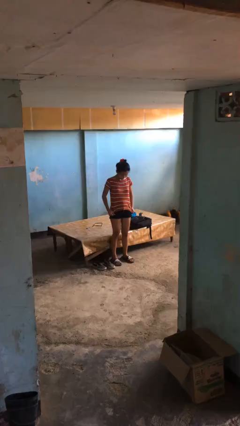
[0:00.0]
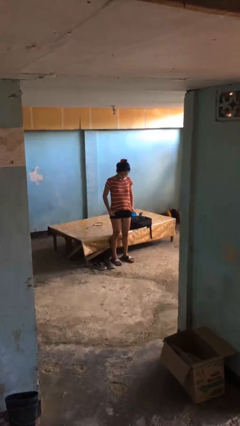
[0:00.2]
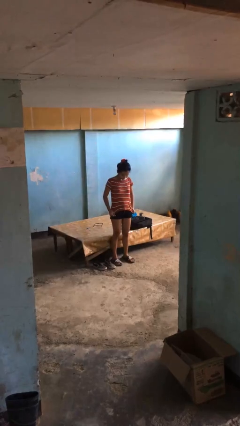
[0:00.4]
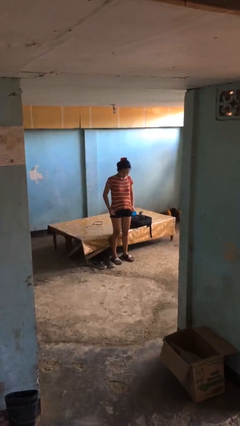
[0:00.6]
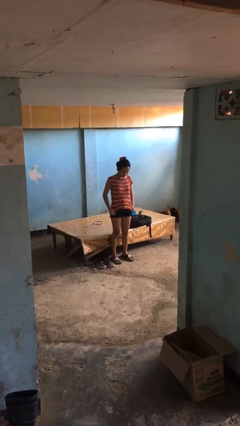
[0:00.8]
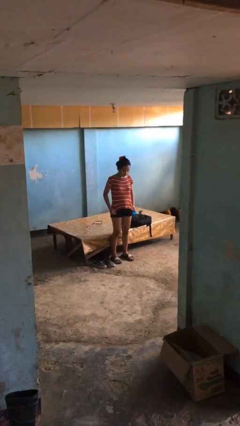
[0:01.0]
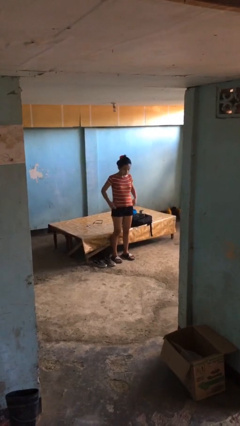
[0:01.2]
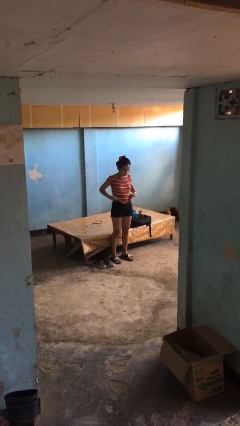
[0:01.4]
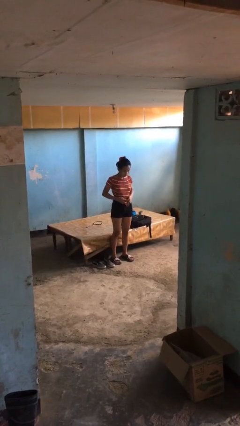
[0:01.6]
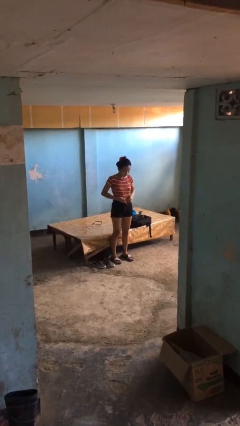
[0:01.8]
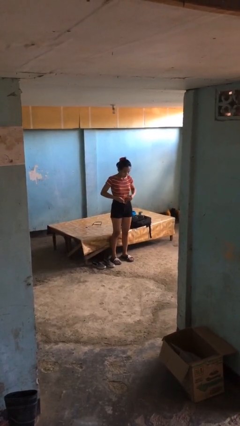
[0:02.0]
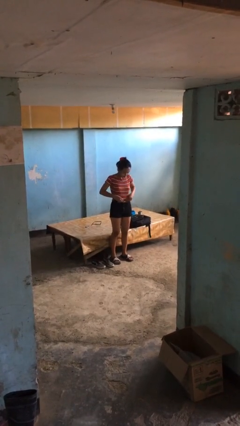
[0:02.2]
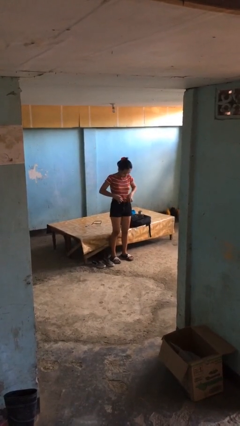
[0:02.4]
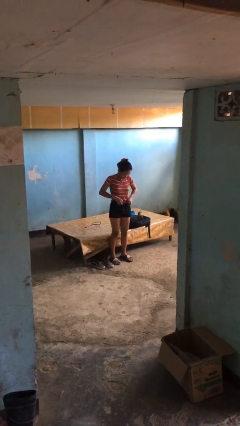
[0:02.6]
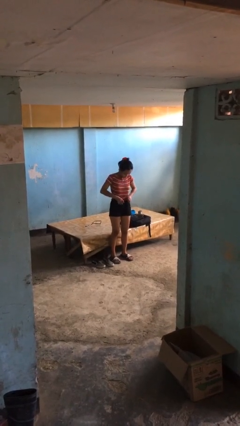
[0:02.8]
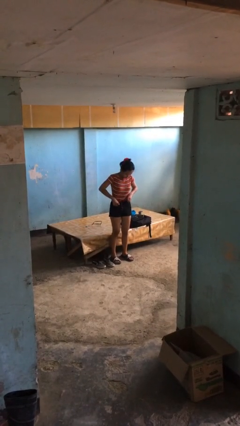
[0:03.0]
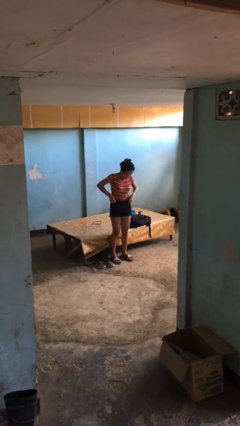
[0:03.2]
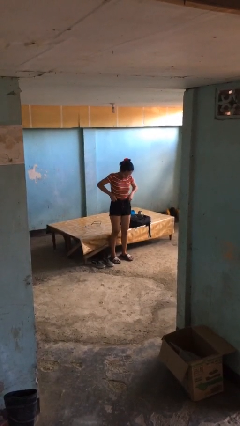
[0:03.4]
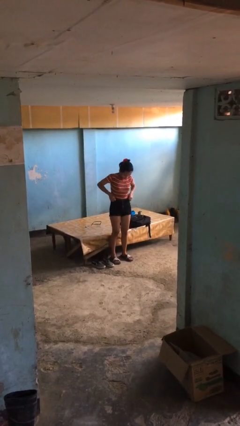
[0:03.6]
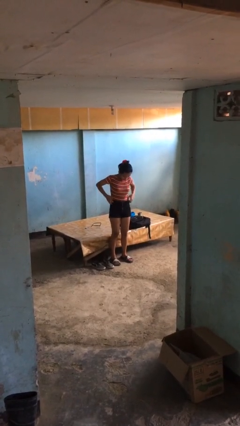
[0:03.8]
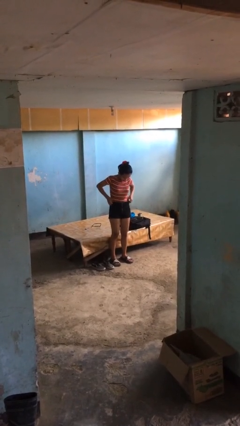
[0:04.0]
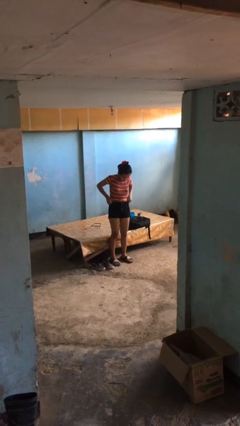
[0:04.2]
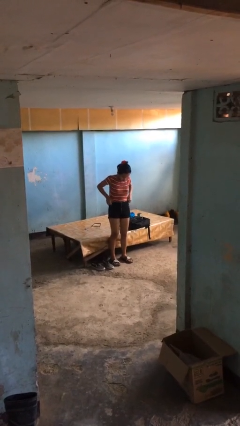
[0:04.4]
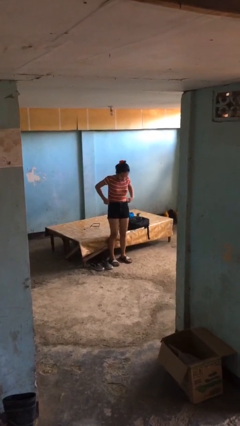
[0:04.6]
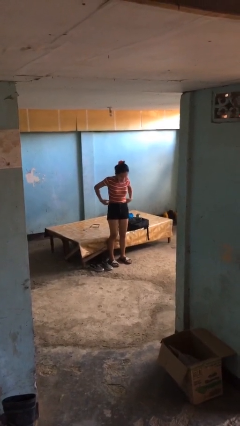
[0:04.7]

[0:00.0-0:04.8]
person tucks in shirt

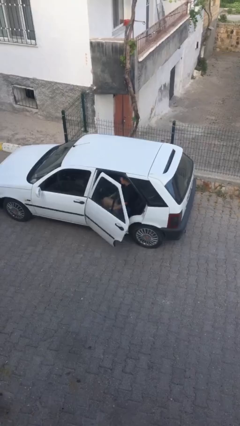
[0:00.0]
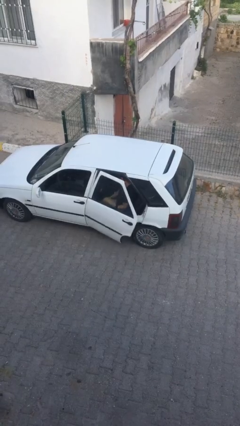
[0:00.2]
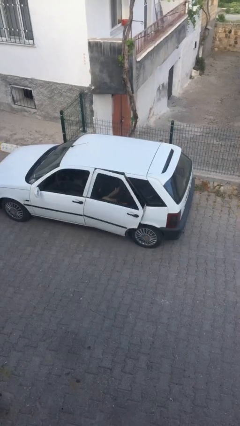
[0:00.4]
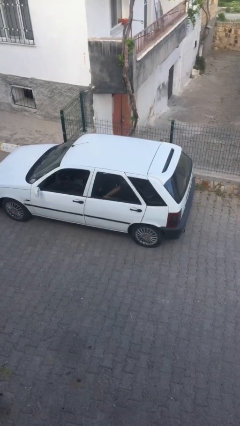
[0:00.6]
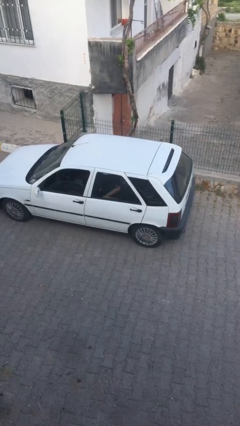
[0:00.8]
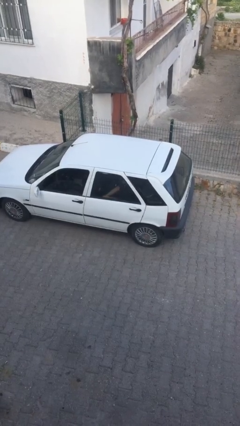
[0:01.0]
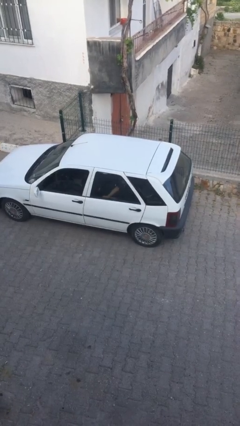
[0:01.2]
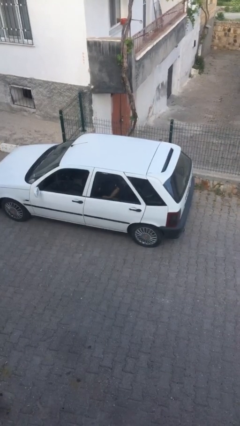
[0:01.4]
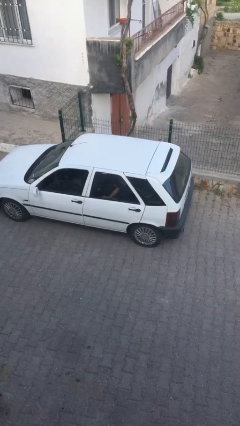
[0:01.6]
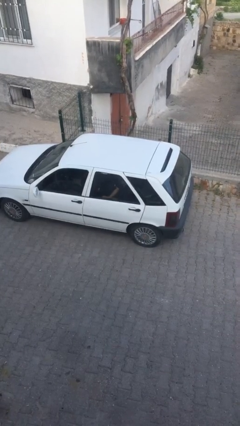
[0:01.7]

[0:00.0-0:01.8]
person closes car door

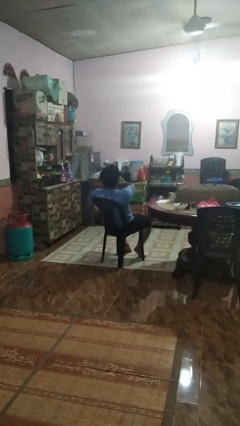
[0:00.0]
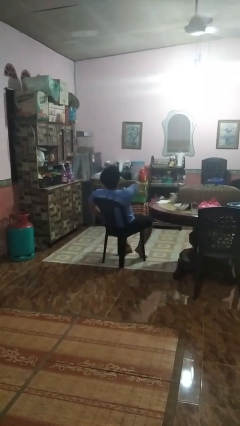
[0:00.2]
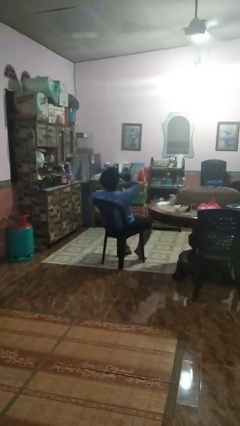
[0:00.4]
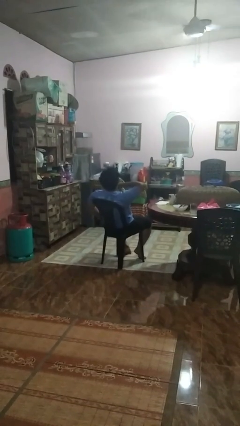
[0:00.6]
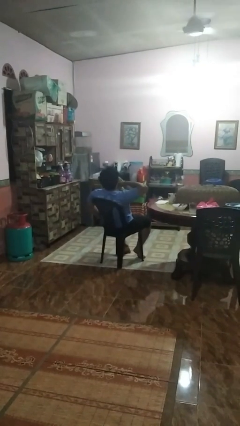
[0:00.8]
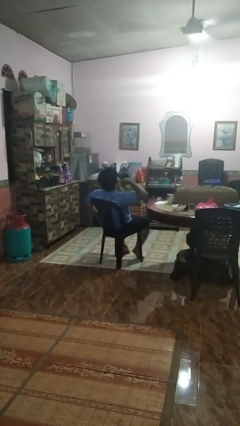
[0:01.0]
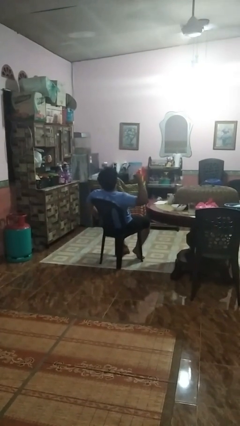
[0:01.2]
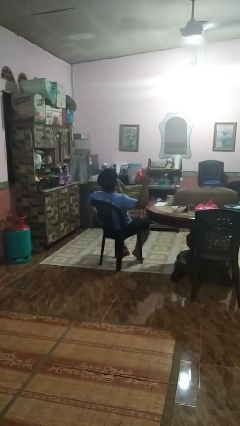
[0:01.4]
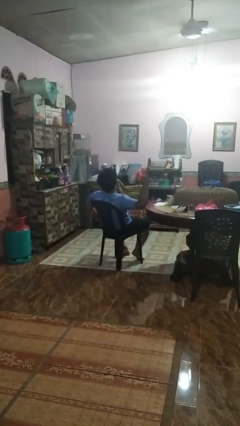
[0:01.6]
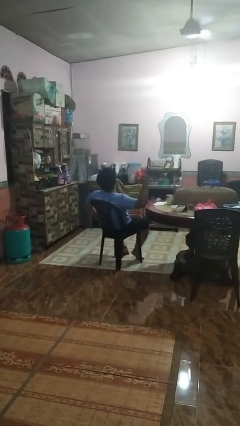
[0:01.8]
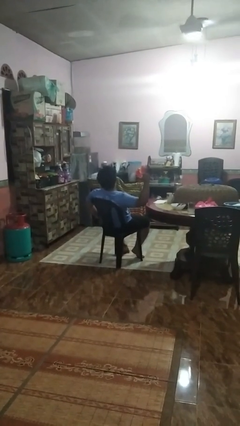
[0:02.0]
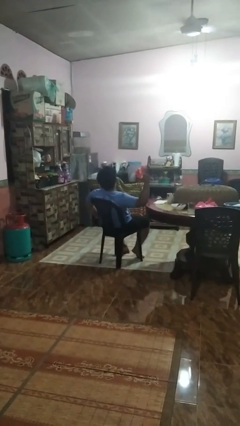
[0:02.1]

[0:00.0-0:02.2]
person gestures cut

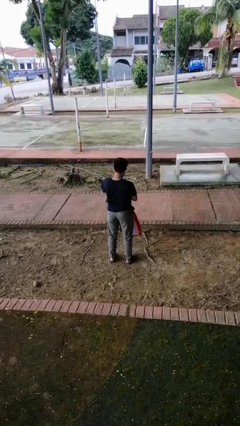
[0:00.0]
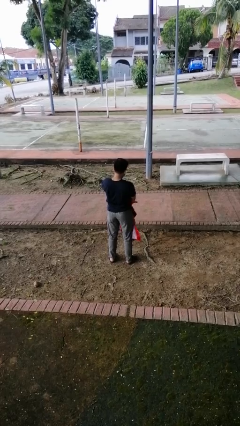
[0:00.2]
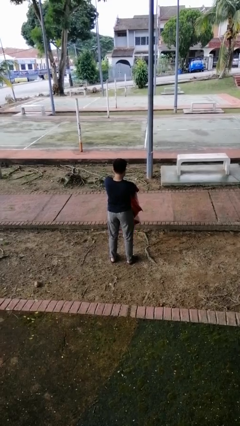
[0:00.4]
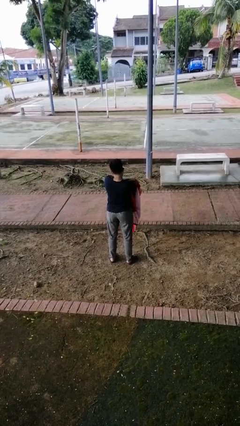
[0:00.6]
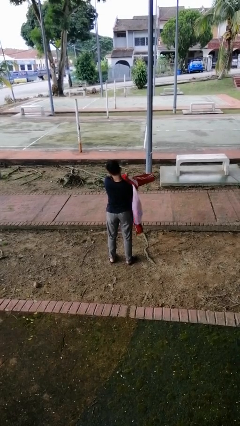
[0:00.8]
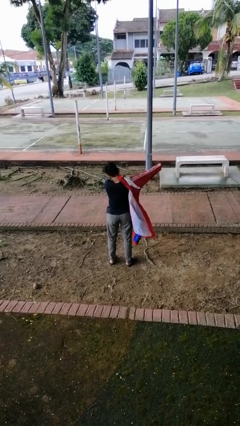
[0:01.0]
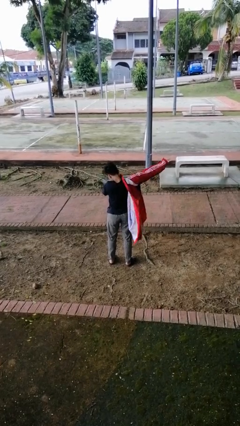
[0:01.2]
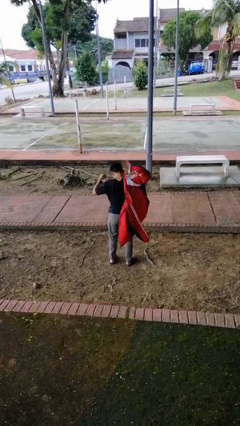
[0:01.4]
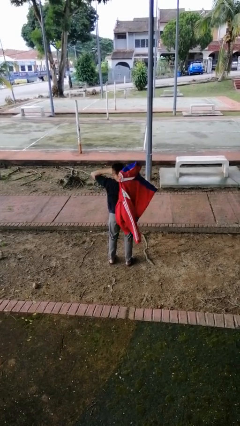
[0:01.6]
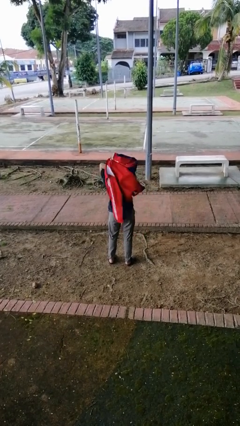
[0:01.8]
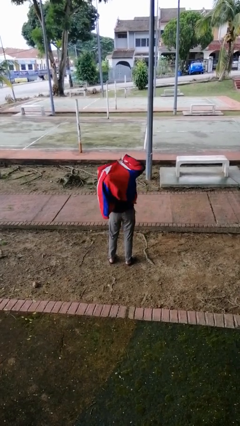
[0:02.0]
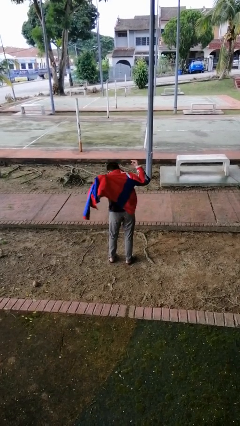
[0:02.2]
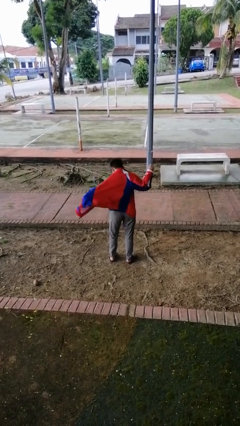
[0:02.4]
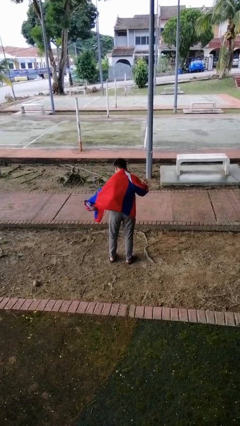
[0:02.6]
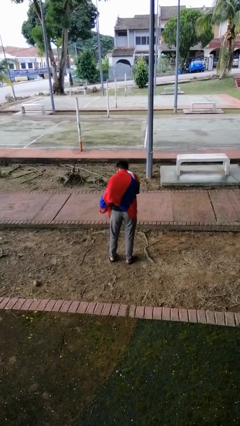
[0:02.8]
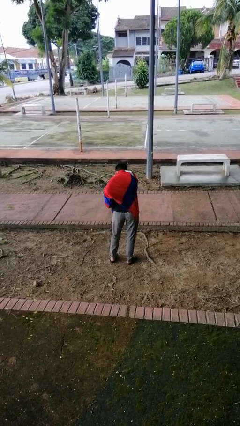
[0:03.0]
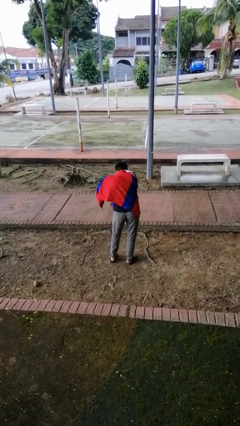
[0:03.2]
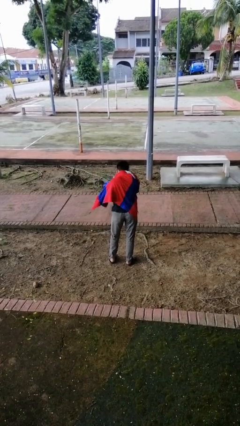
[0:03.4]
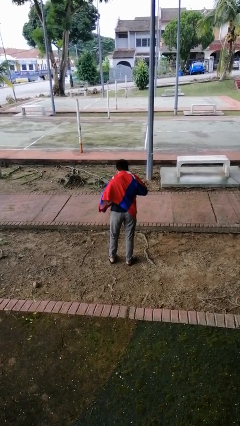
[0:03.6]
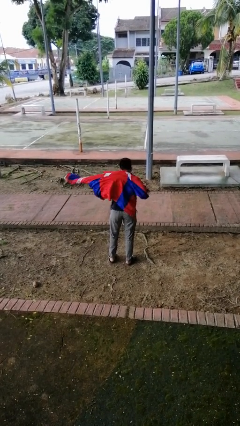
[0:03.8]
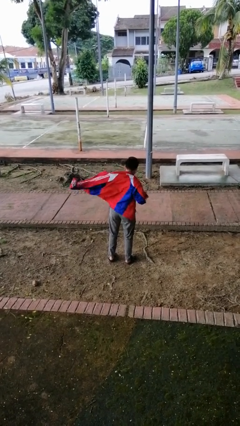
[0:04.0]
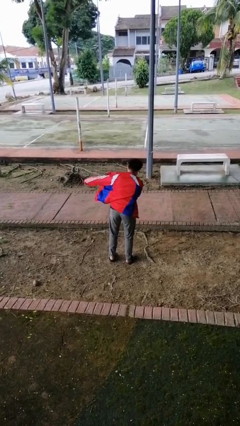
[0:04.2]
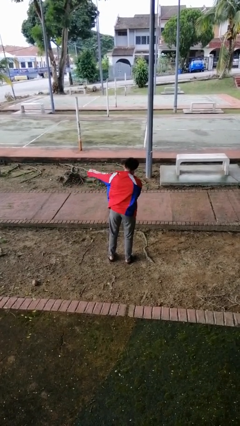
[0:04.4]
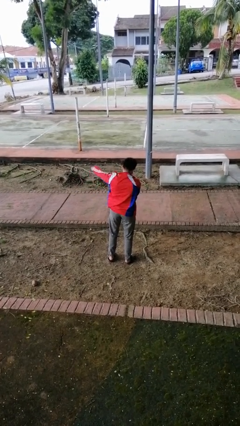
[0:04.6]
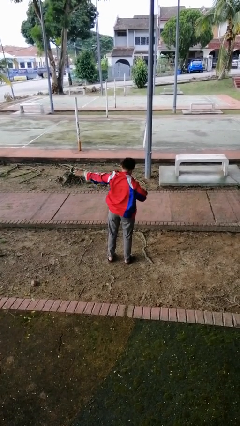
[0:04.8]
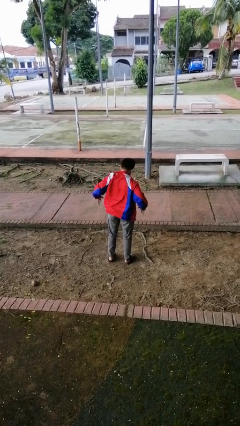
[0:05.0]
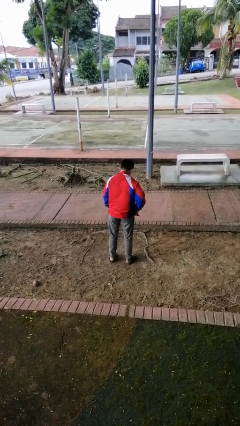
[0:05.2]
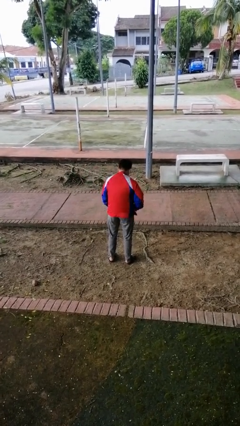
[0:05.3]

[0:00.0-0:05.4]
person puts on jacket

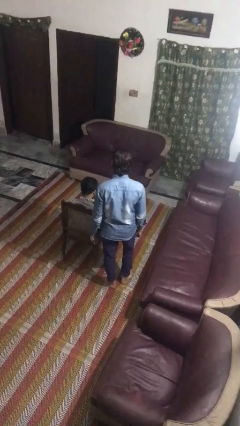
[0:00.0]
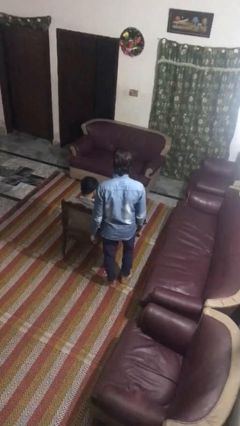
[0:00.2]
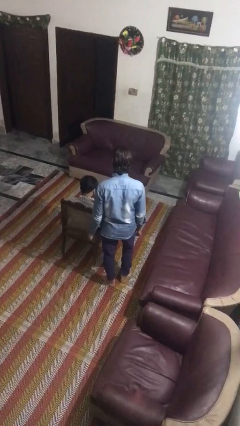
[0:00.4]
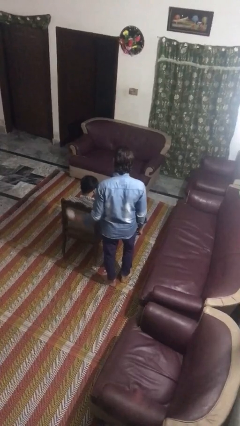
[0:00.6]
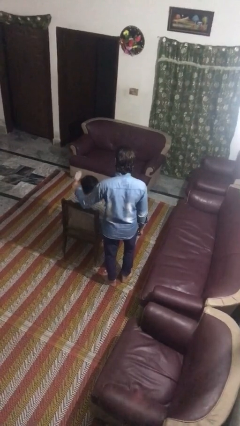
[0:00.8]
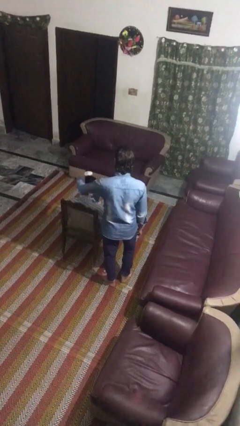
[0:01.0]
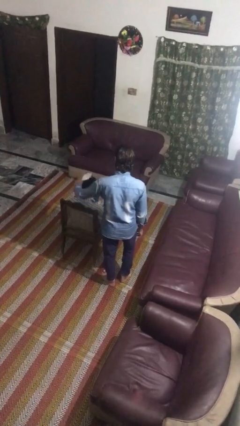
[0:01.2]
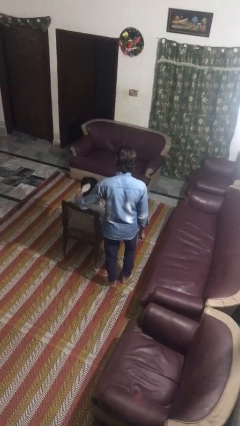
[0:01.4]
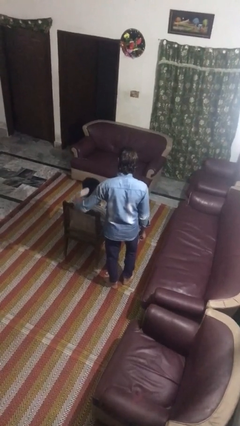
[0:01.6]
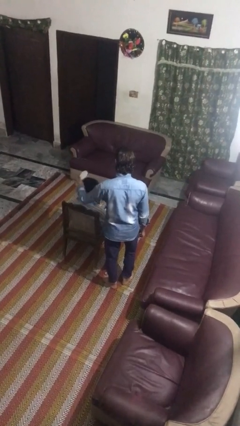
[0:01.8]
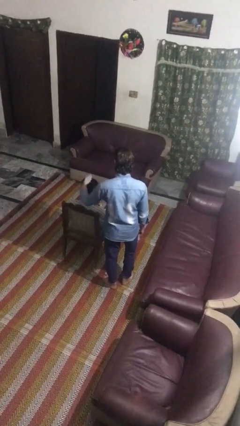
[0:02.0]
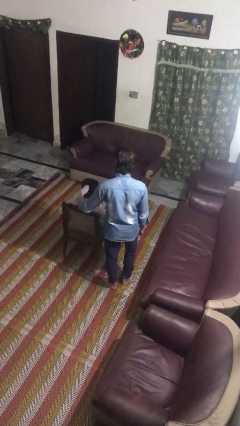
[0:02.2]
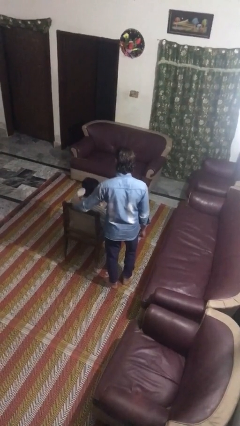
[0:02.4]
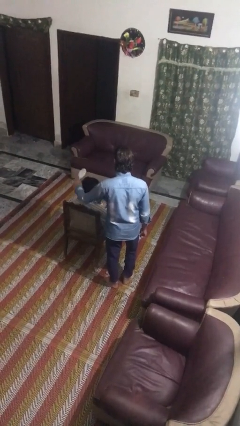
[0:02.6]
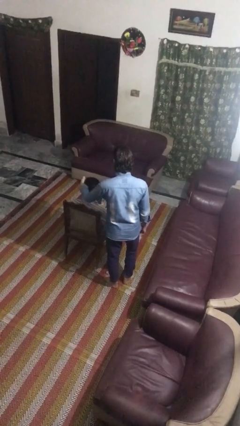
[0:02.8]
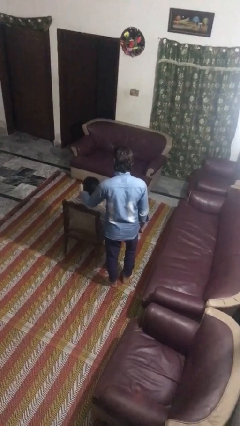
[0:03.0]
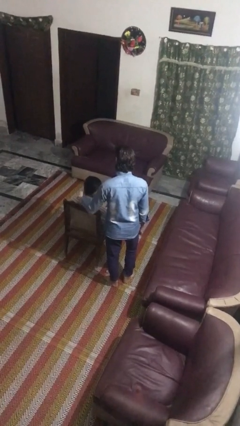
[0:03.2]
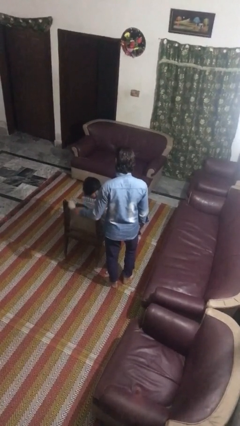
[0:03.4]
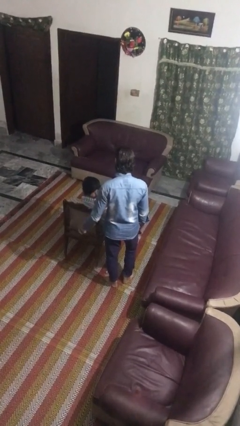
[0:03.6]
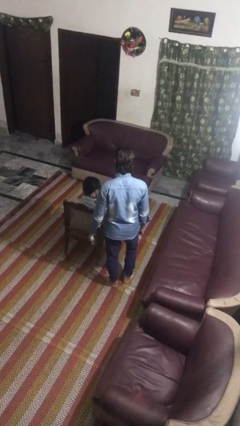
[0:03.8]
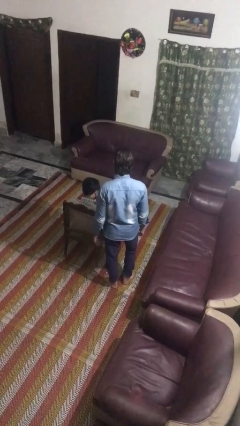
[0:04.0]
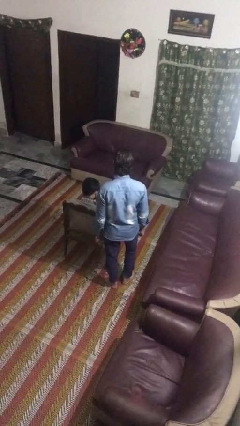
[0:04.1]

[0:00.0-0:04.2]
person brushes hair of person
